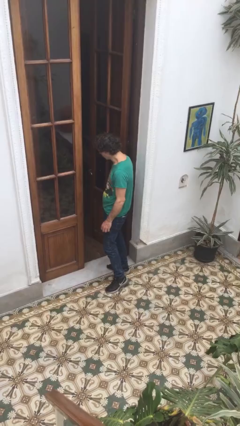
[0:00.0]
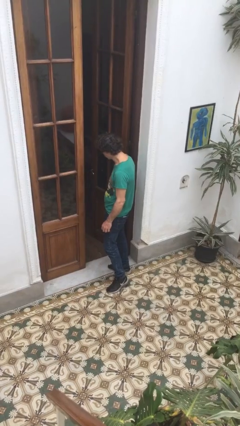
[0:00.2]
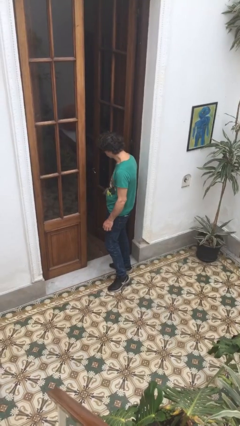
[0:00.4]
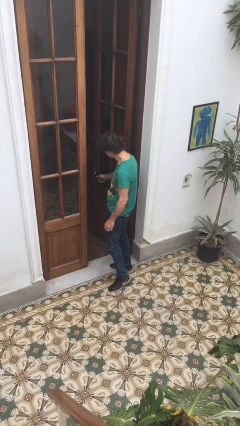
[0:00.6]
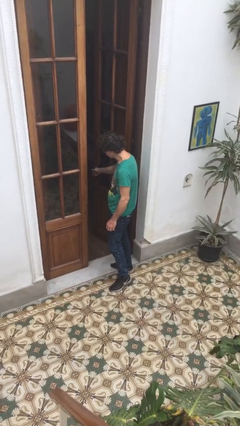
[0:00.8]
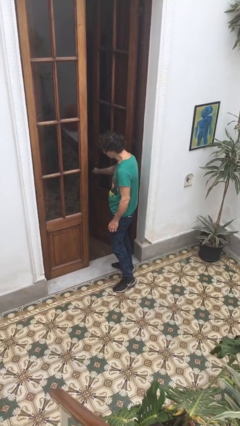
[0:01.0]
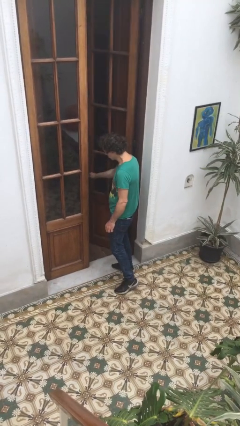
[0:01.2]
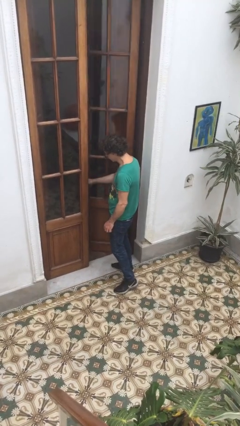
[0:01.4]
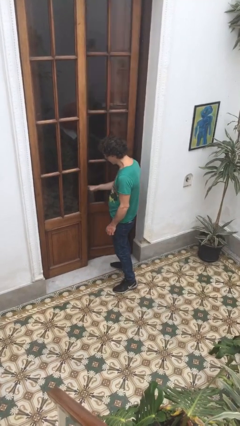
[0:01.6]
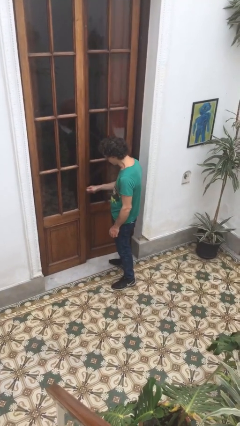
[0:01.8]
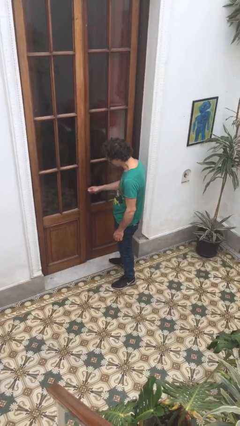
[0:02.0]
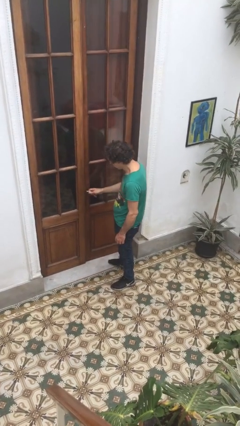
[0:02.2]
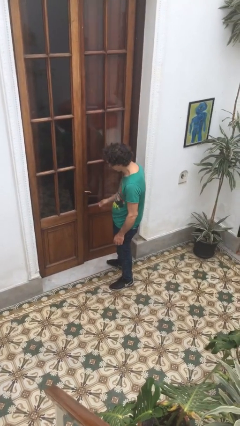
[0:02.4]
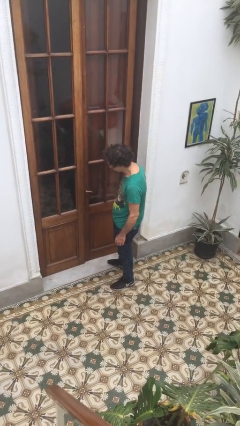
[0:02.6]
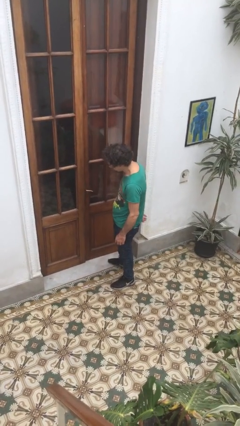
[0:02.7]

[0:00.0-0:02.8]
person closes facility door

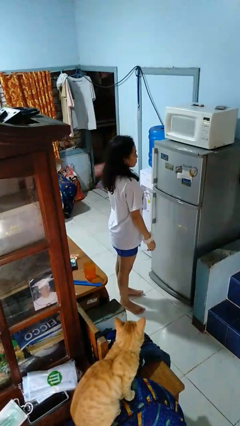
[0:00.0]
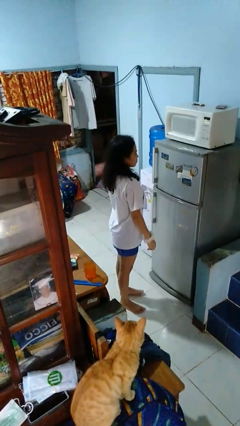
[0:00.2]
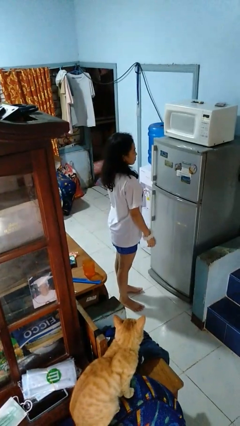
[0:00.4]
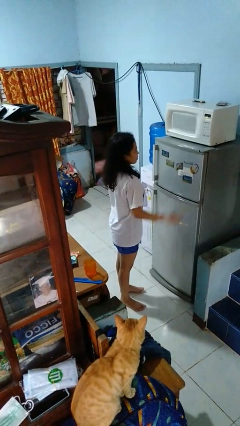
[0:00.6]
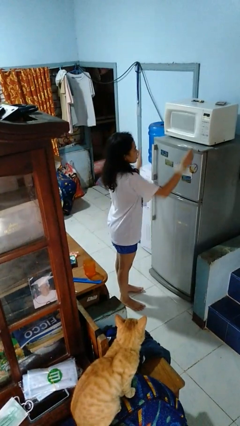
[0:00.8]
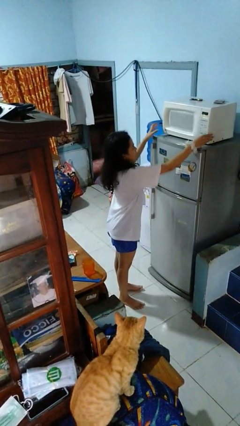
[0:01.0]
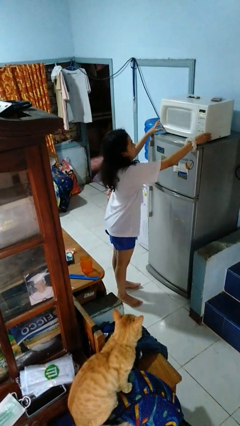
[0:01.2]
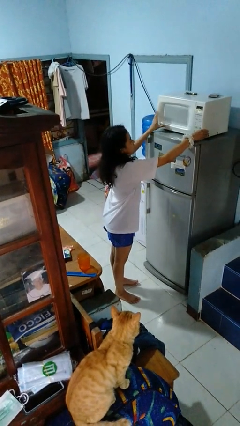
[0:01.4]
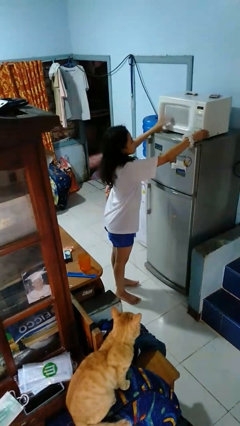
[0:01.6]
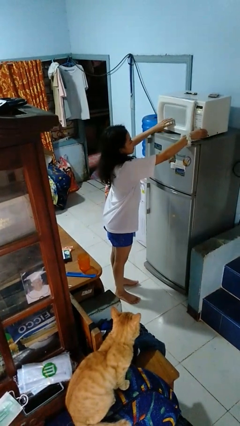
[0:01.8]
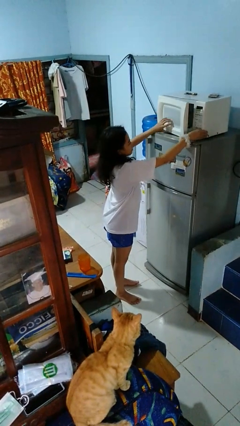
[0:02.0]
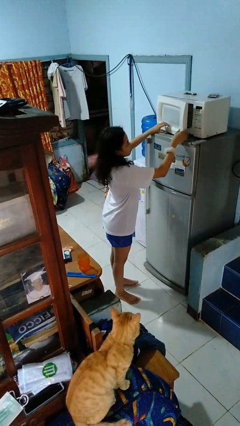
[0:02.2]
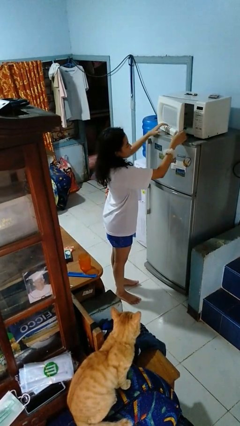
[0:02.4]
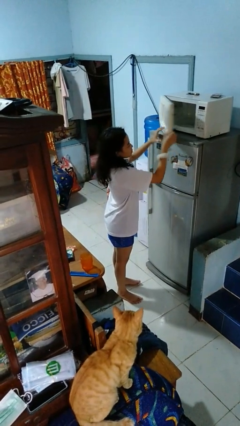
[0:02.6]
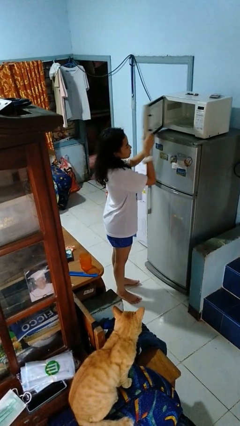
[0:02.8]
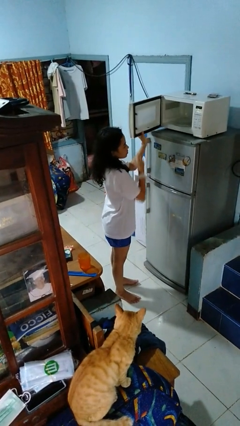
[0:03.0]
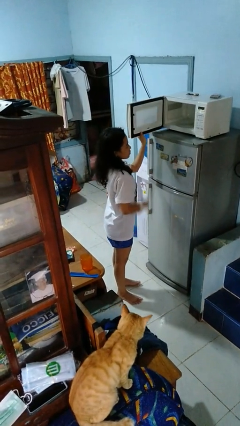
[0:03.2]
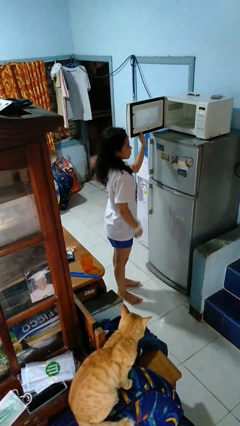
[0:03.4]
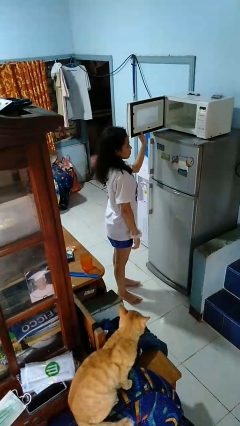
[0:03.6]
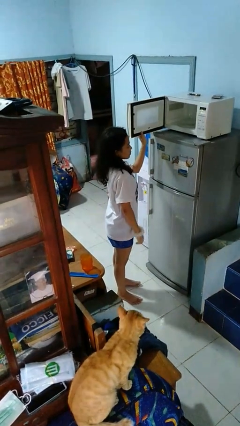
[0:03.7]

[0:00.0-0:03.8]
person opens microwave

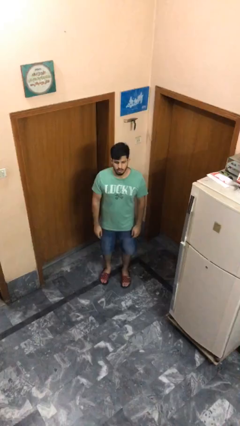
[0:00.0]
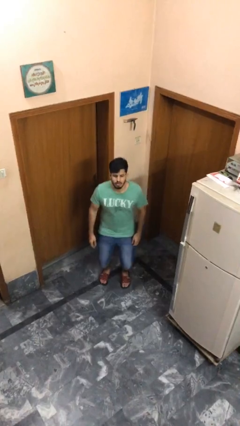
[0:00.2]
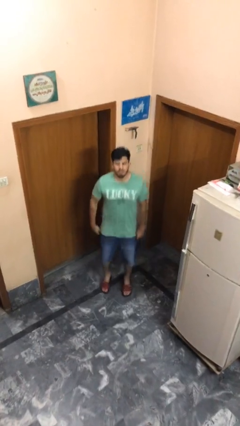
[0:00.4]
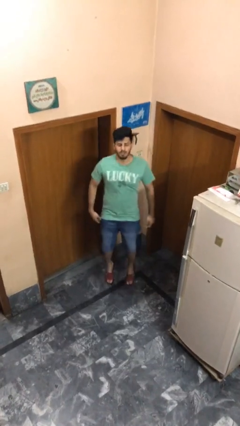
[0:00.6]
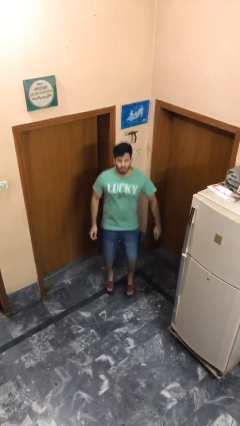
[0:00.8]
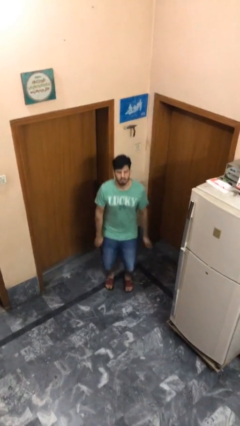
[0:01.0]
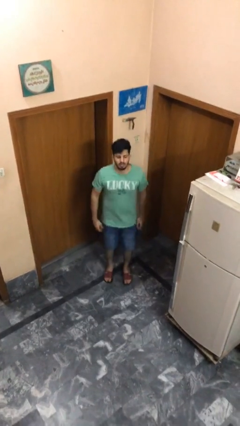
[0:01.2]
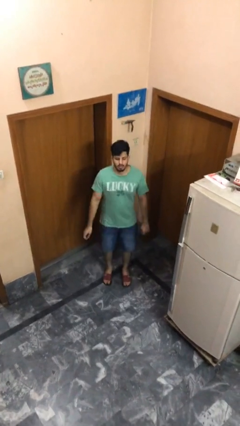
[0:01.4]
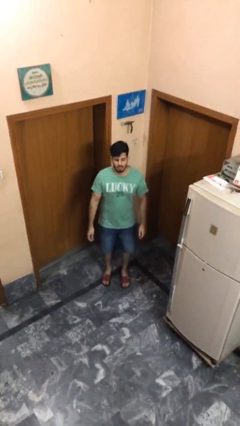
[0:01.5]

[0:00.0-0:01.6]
person jumps

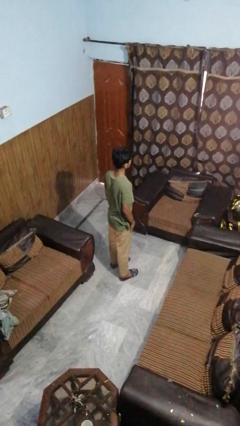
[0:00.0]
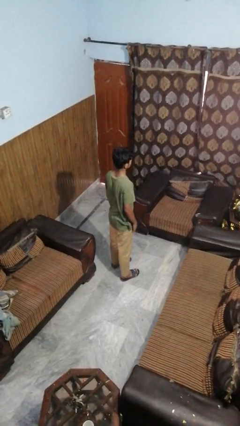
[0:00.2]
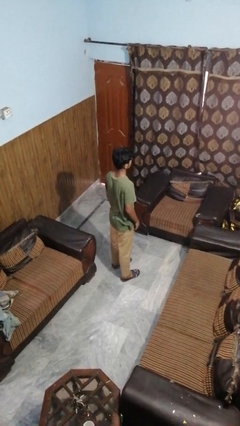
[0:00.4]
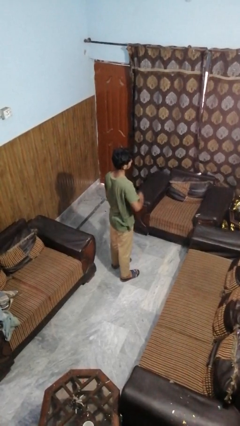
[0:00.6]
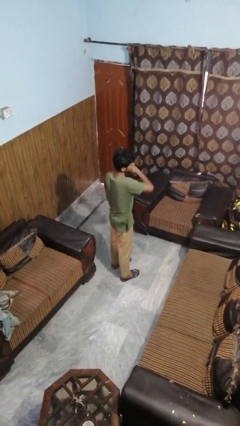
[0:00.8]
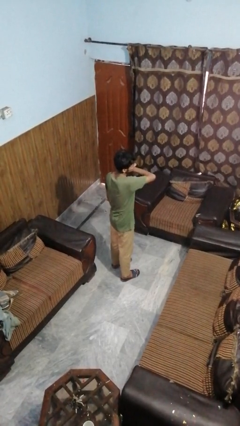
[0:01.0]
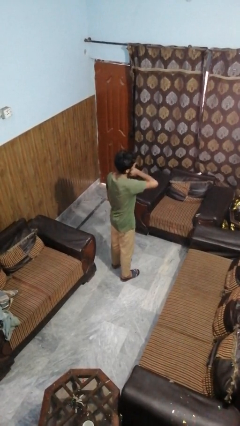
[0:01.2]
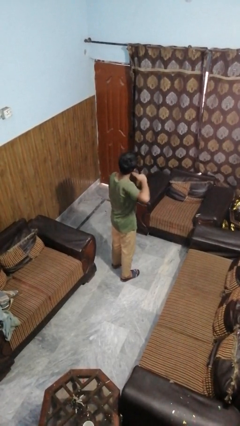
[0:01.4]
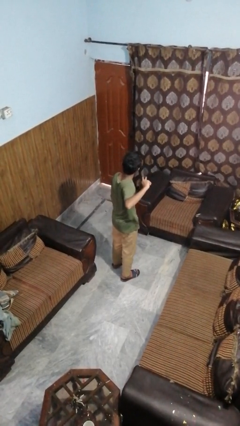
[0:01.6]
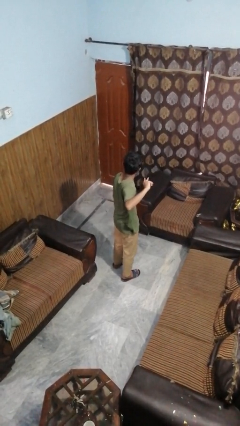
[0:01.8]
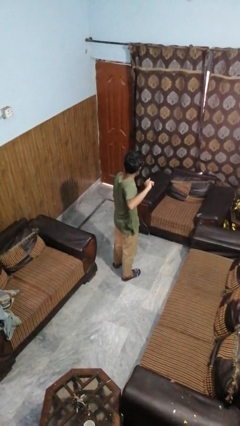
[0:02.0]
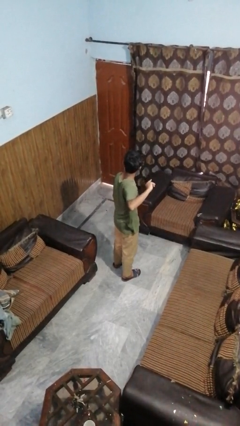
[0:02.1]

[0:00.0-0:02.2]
person gestures cut

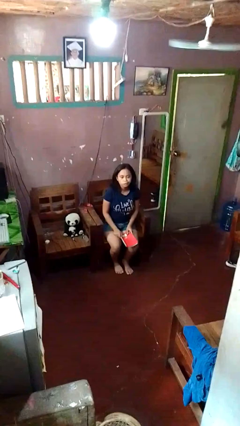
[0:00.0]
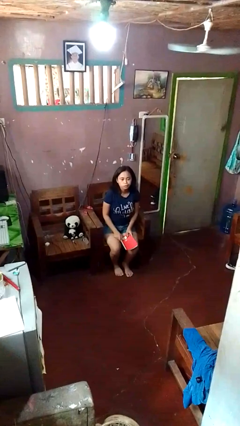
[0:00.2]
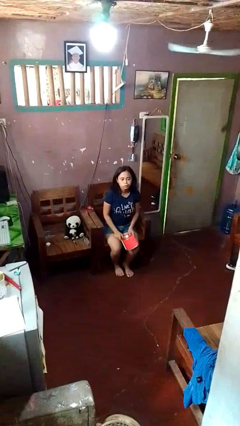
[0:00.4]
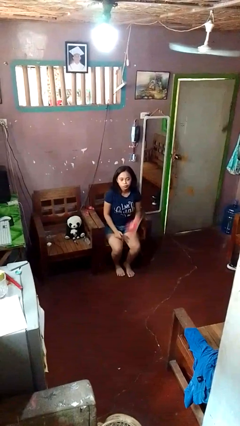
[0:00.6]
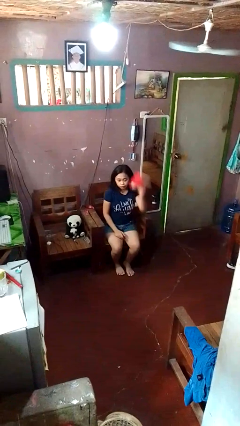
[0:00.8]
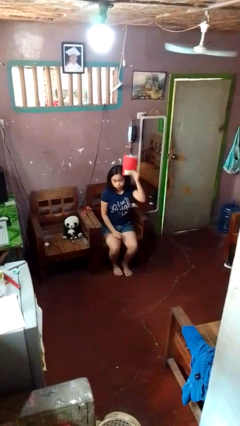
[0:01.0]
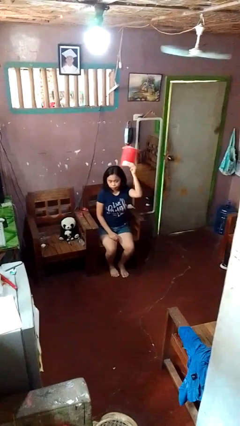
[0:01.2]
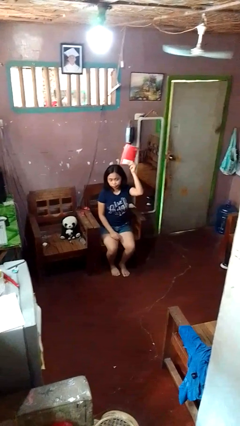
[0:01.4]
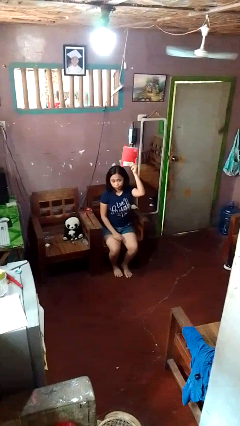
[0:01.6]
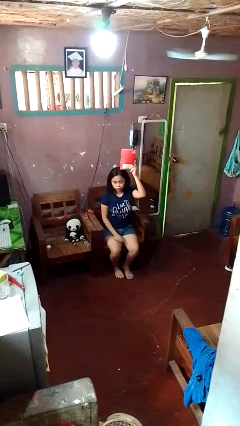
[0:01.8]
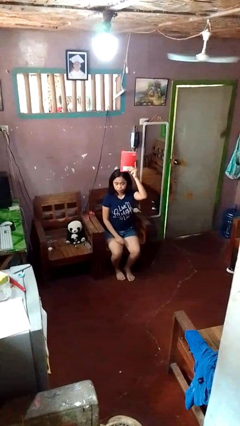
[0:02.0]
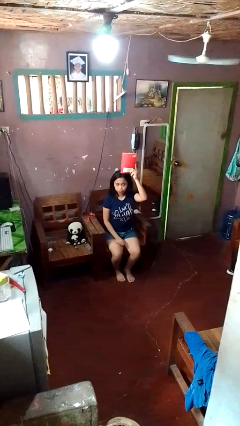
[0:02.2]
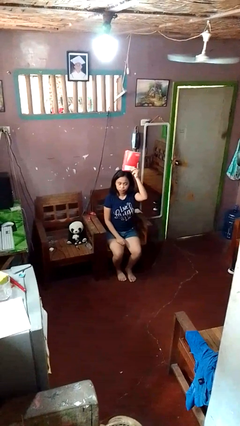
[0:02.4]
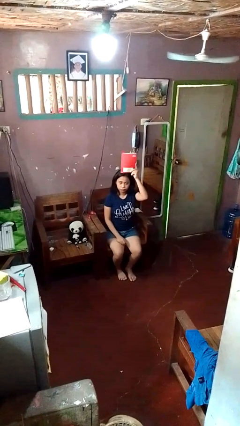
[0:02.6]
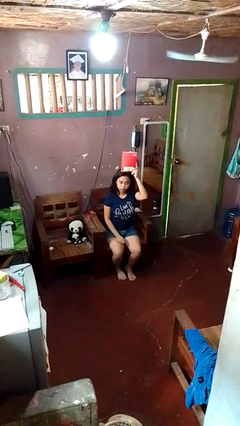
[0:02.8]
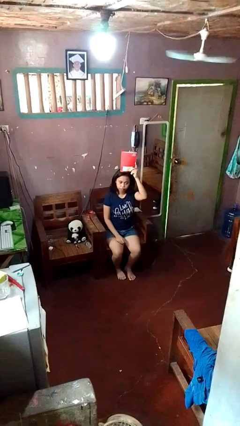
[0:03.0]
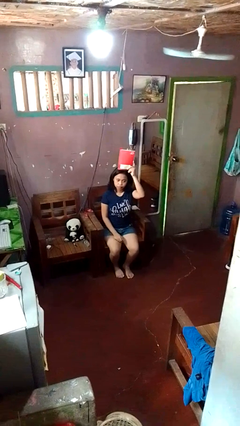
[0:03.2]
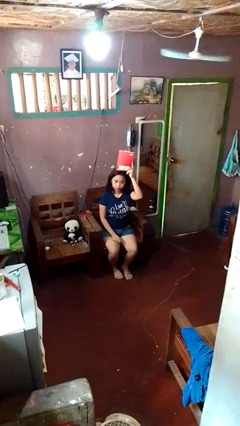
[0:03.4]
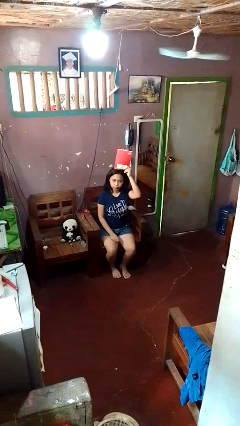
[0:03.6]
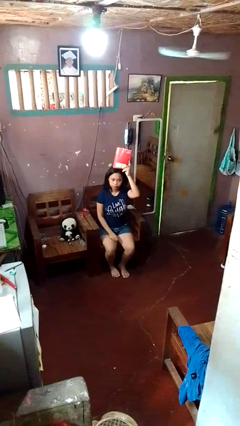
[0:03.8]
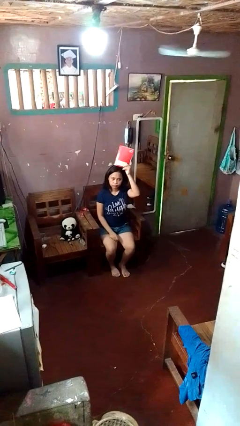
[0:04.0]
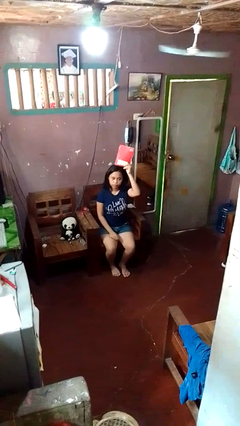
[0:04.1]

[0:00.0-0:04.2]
person holds object above head

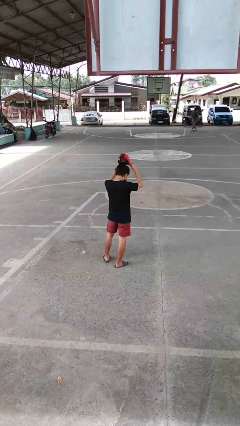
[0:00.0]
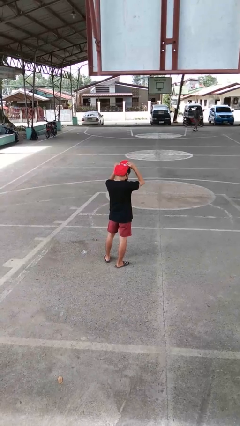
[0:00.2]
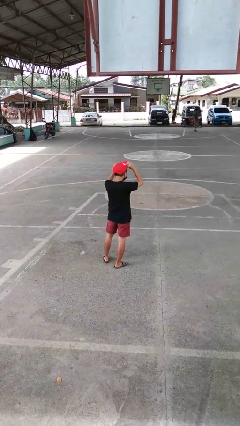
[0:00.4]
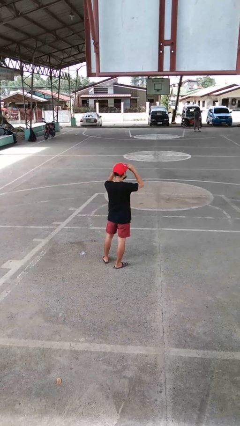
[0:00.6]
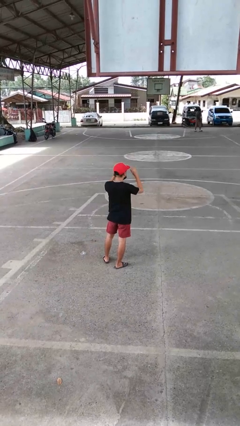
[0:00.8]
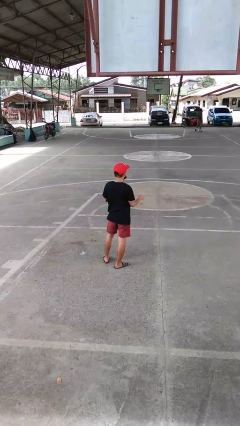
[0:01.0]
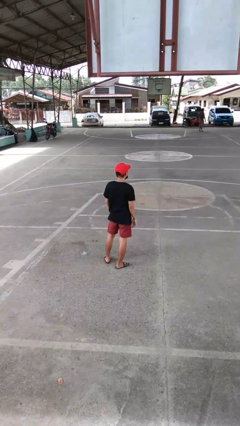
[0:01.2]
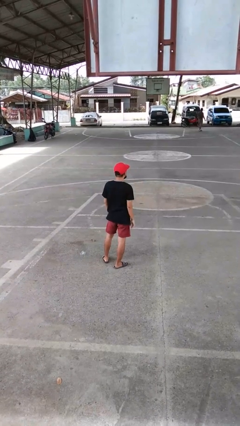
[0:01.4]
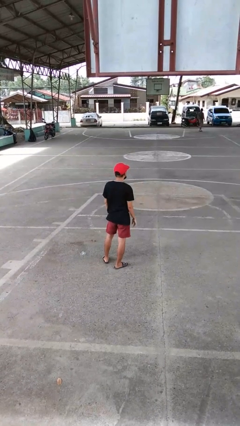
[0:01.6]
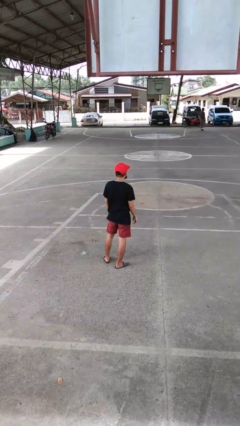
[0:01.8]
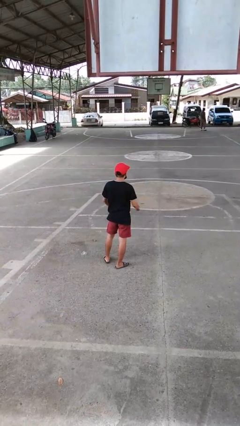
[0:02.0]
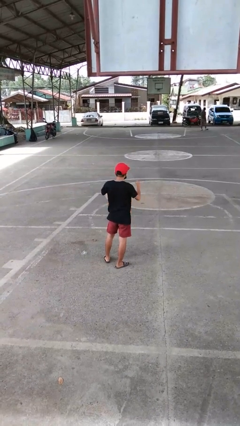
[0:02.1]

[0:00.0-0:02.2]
person puts on hat

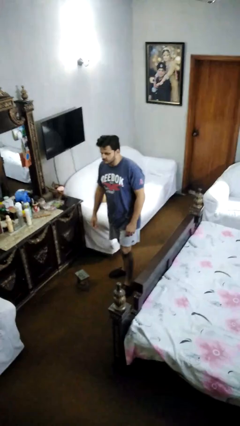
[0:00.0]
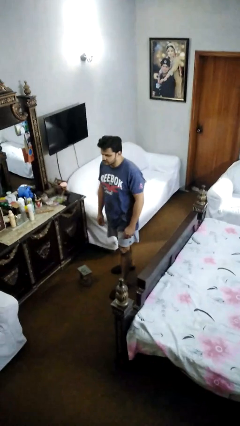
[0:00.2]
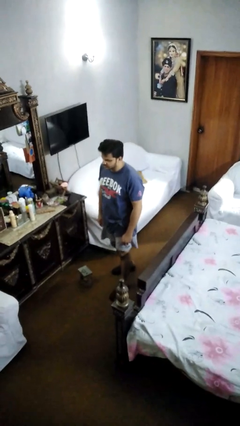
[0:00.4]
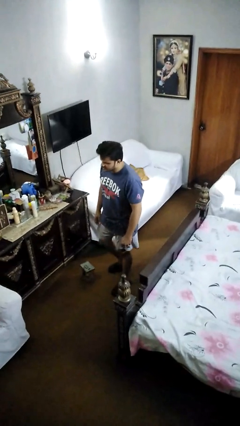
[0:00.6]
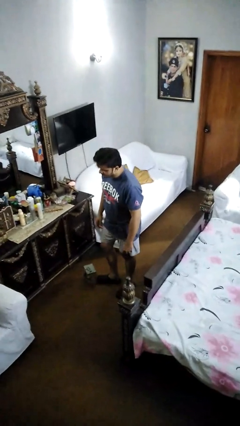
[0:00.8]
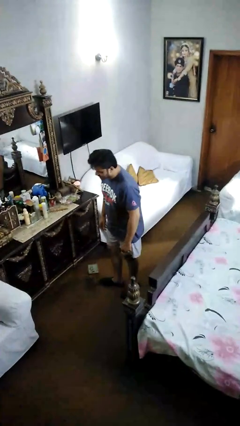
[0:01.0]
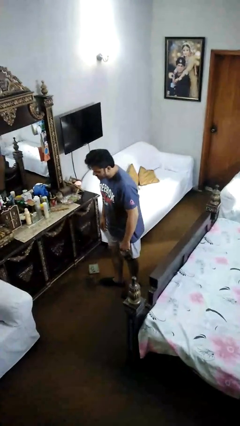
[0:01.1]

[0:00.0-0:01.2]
person trips on object on floor
